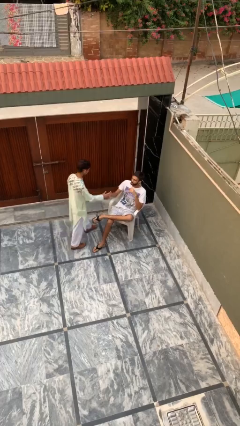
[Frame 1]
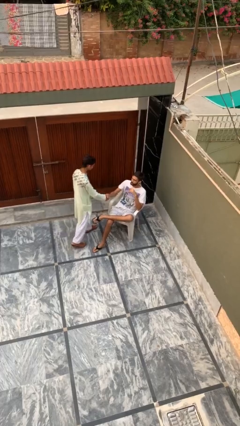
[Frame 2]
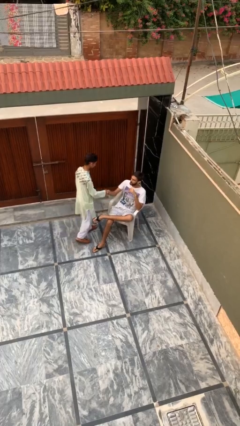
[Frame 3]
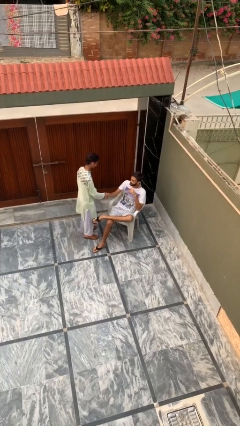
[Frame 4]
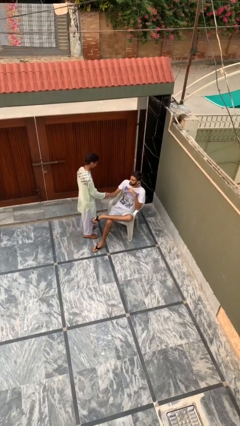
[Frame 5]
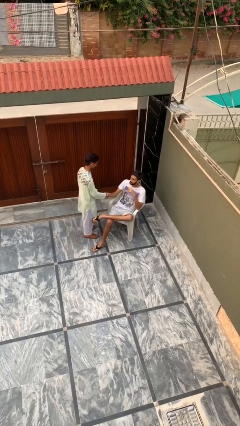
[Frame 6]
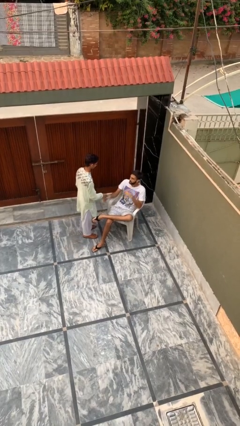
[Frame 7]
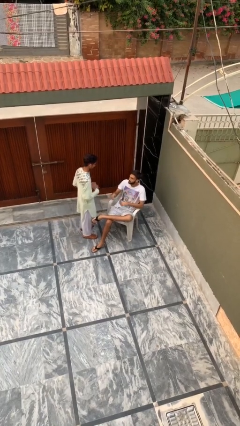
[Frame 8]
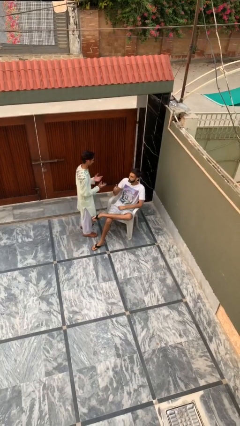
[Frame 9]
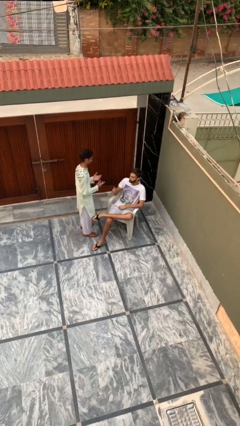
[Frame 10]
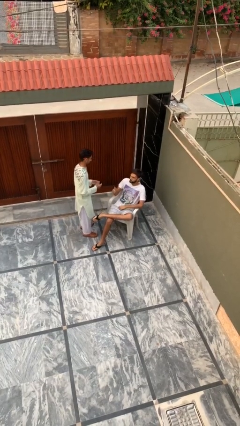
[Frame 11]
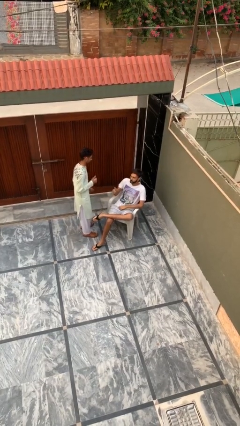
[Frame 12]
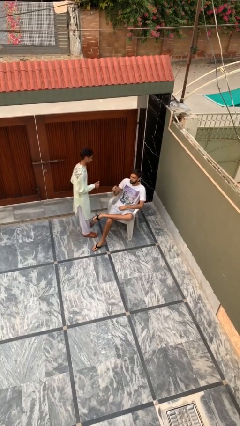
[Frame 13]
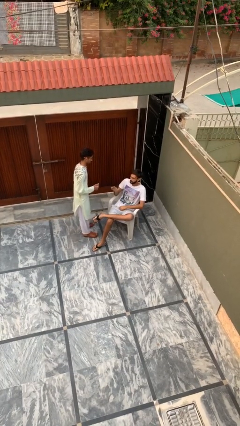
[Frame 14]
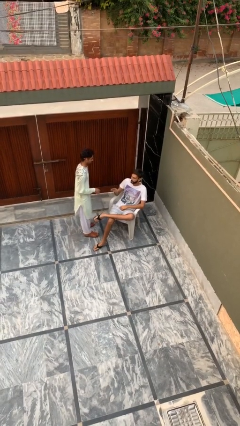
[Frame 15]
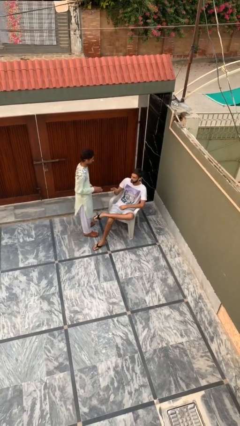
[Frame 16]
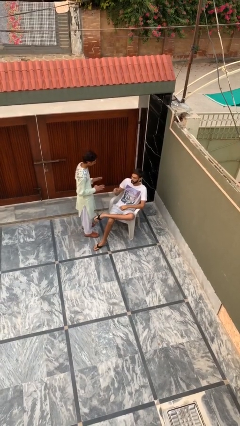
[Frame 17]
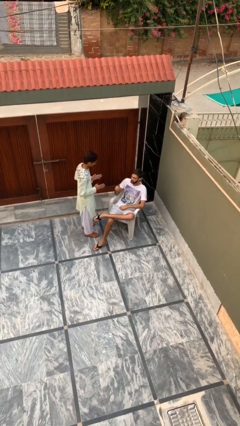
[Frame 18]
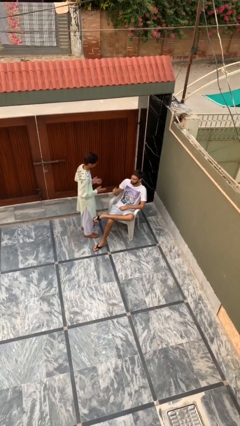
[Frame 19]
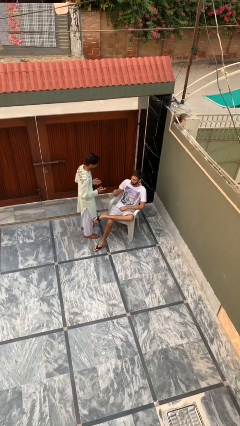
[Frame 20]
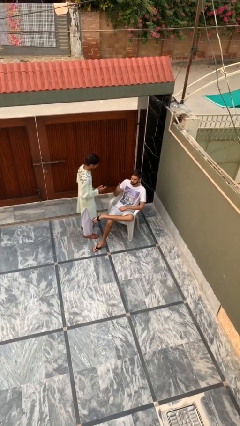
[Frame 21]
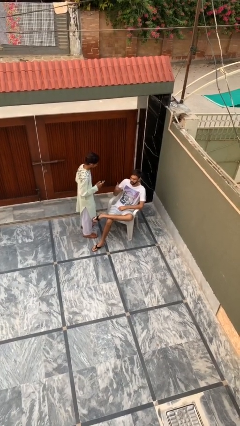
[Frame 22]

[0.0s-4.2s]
person shakes hand

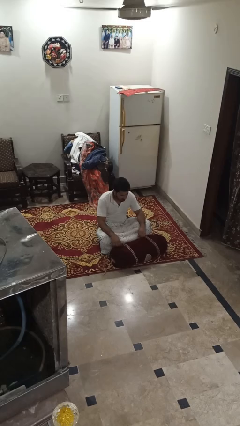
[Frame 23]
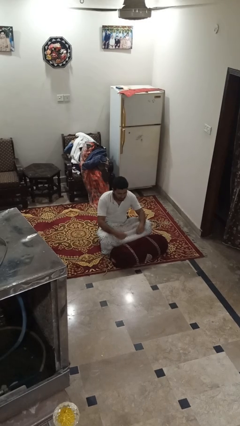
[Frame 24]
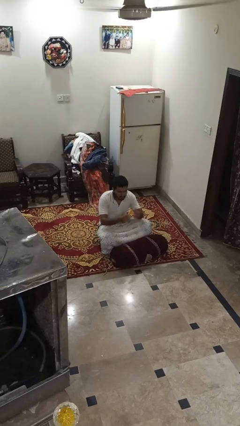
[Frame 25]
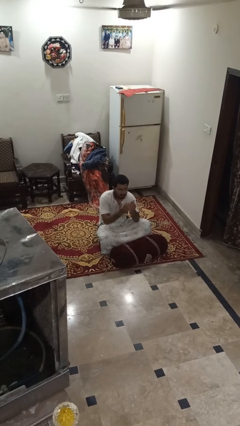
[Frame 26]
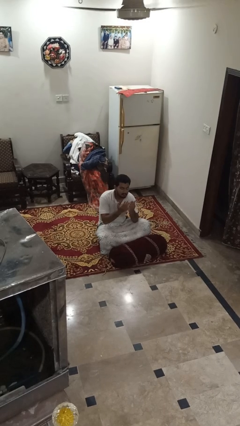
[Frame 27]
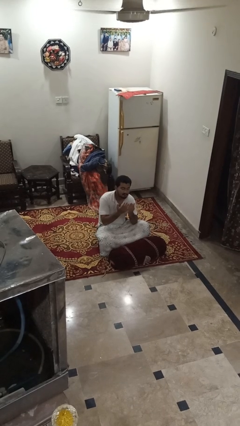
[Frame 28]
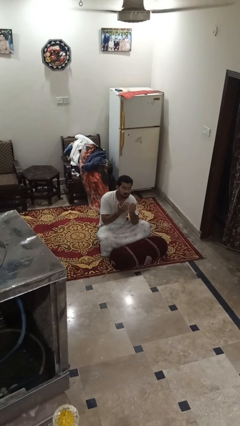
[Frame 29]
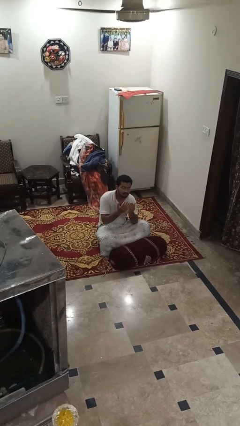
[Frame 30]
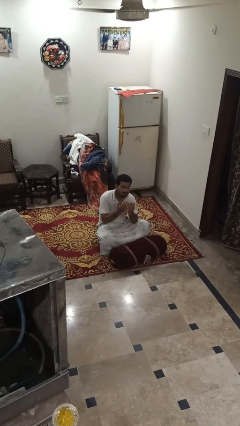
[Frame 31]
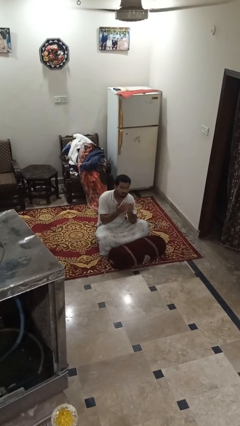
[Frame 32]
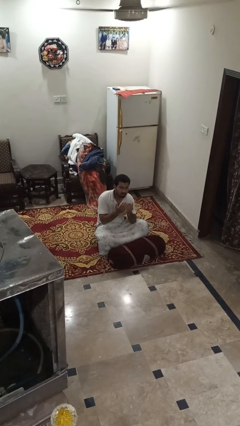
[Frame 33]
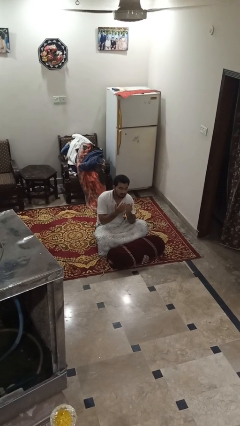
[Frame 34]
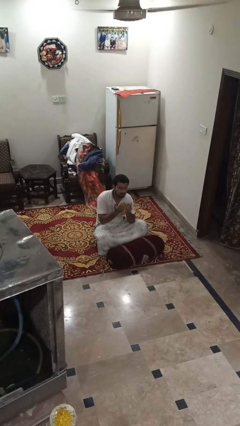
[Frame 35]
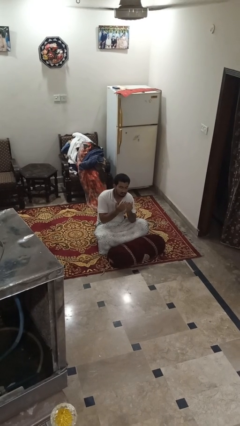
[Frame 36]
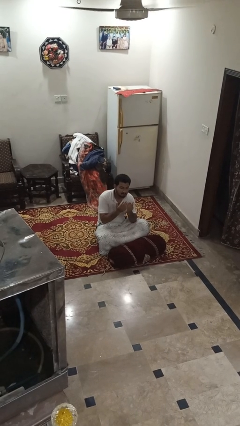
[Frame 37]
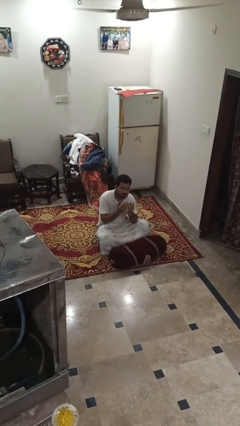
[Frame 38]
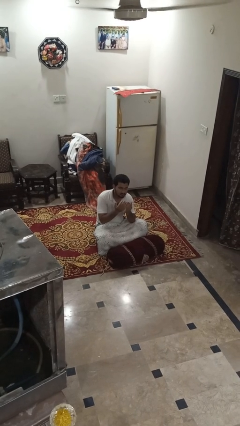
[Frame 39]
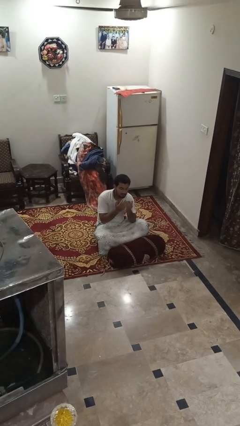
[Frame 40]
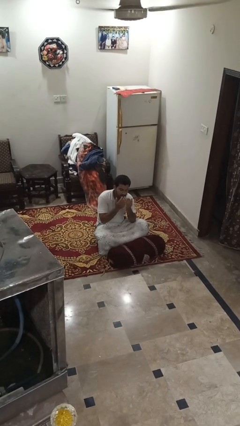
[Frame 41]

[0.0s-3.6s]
person prays

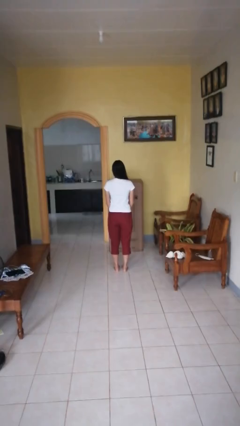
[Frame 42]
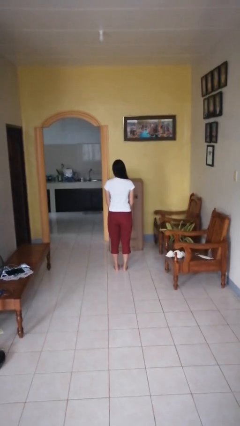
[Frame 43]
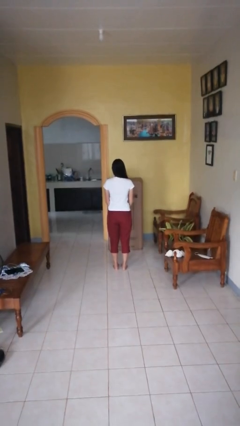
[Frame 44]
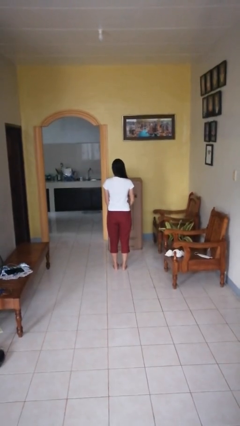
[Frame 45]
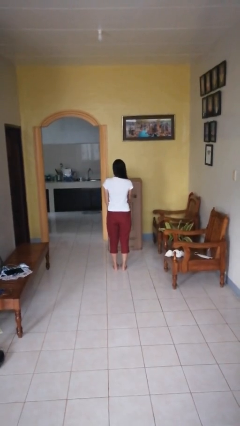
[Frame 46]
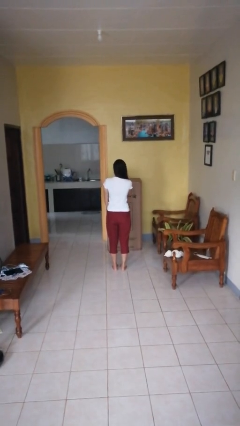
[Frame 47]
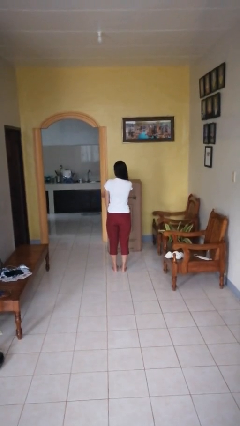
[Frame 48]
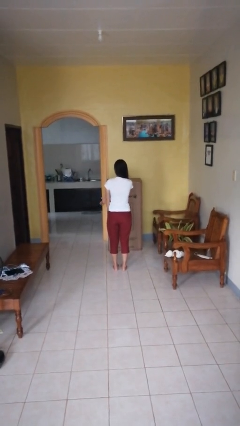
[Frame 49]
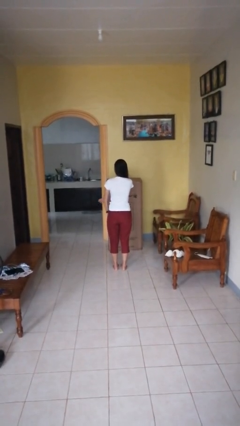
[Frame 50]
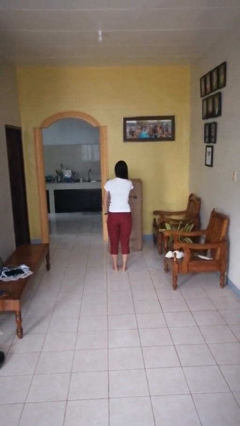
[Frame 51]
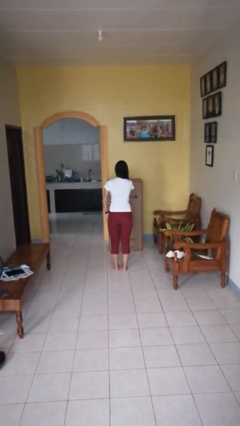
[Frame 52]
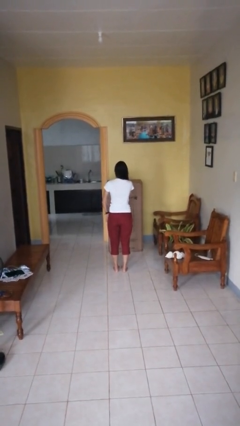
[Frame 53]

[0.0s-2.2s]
person swats bug

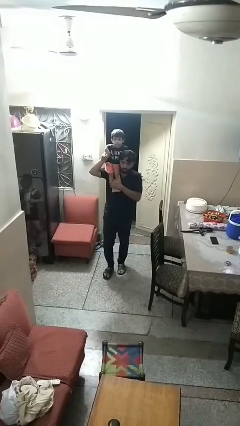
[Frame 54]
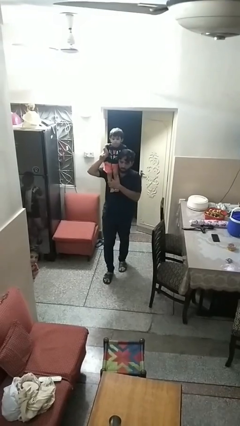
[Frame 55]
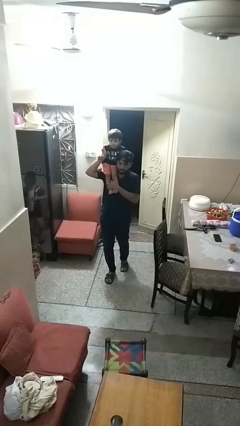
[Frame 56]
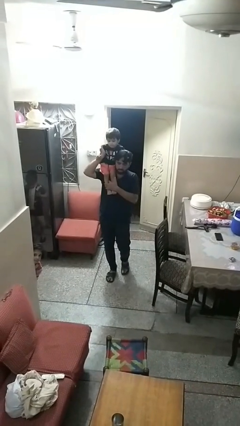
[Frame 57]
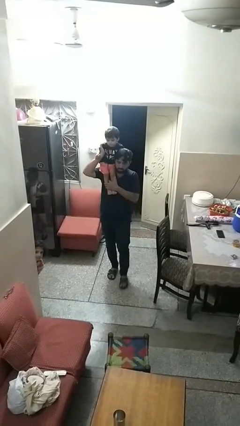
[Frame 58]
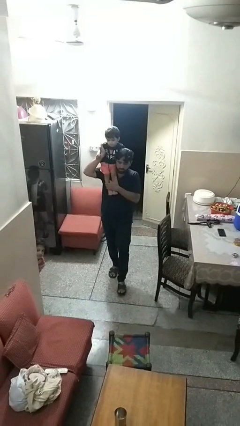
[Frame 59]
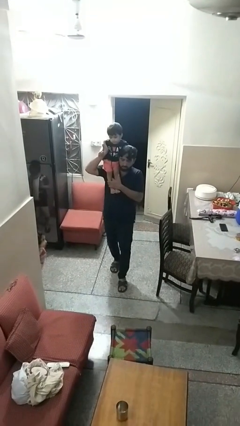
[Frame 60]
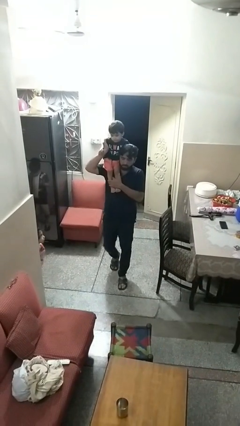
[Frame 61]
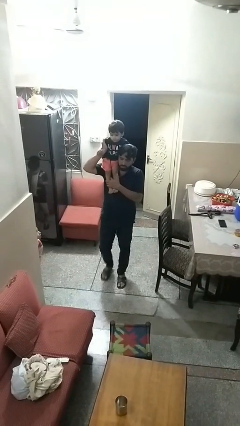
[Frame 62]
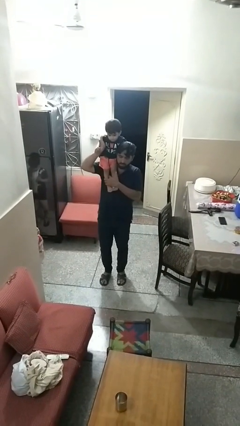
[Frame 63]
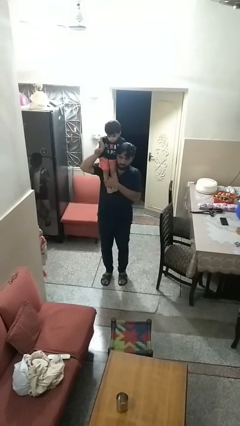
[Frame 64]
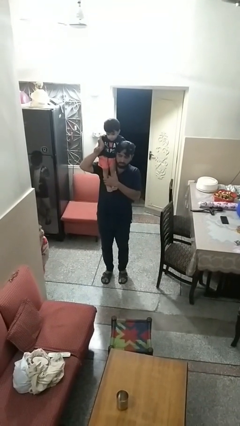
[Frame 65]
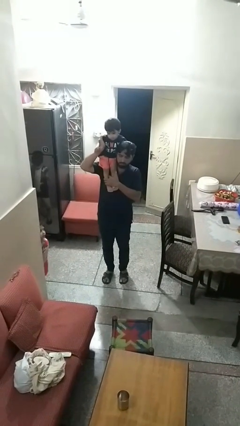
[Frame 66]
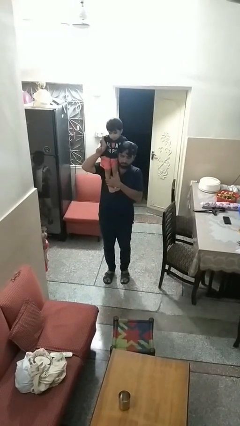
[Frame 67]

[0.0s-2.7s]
person carries person on shoulders

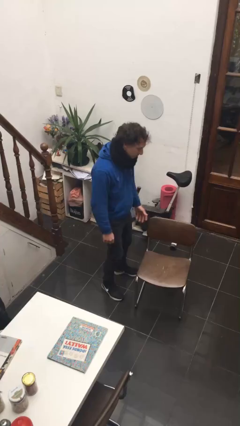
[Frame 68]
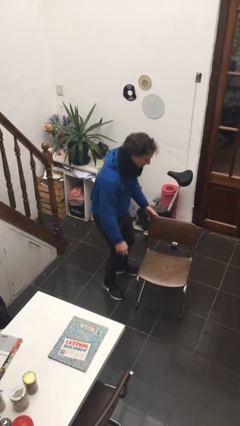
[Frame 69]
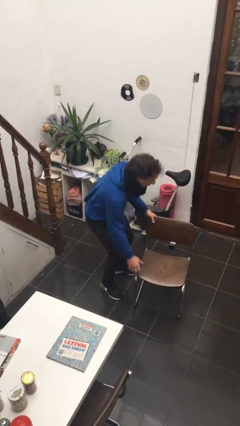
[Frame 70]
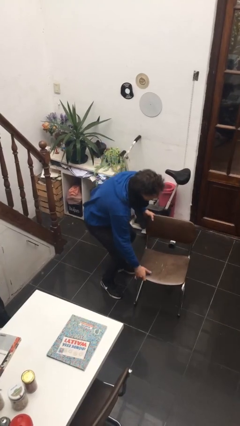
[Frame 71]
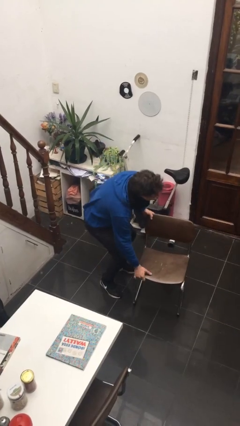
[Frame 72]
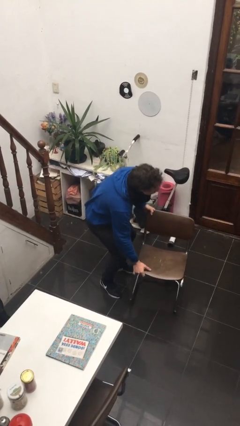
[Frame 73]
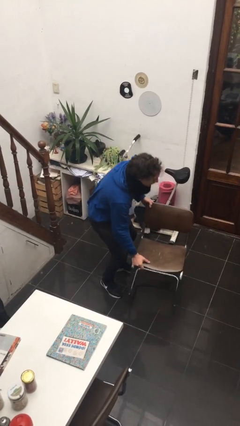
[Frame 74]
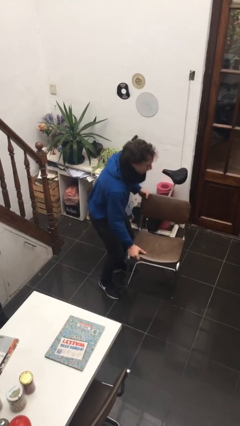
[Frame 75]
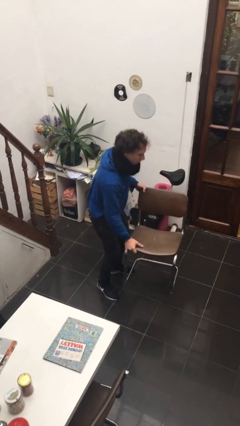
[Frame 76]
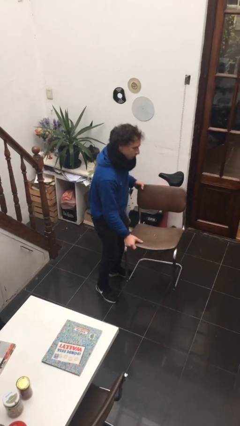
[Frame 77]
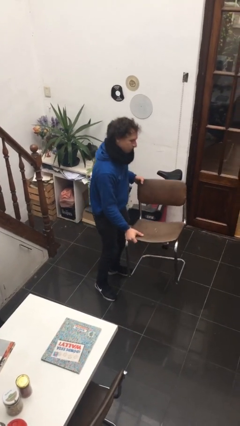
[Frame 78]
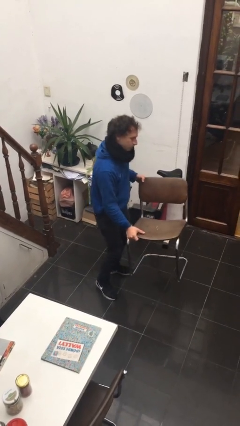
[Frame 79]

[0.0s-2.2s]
person picks up object from floor

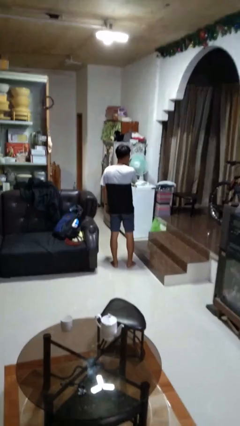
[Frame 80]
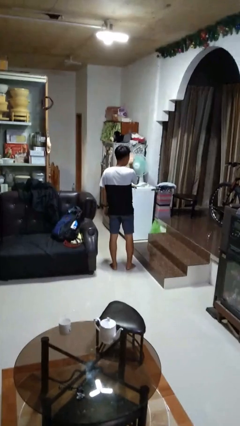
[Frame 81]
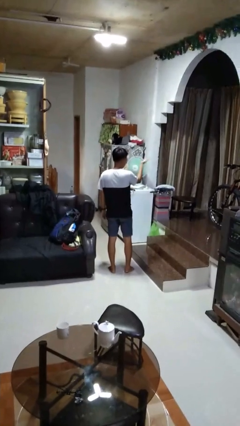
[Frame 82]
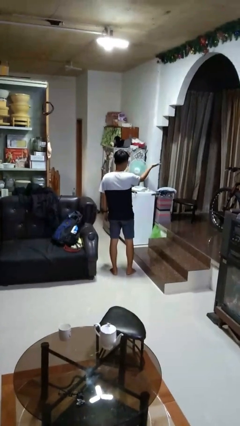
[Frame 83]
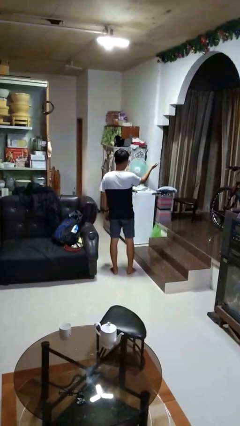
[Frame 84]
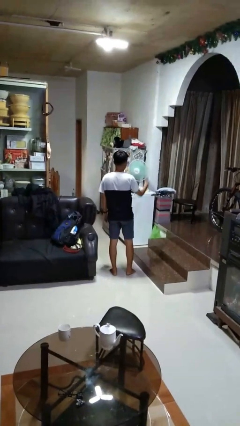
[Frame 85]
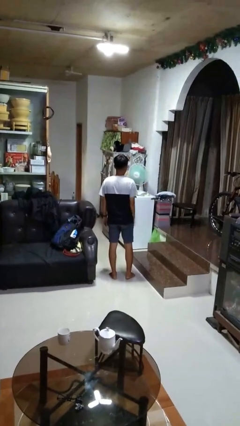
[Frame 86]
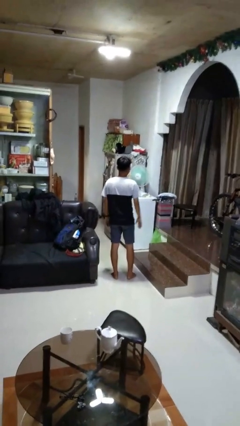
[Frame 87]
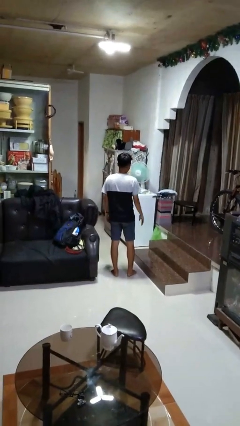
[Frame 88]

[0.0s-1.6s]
person gestures blow kiss

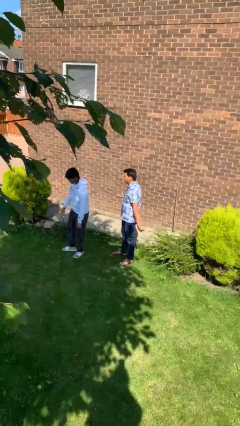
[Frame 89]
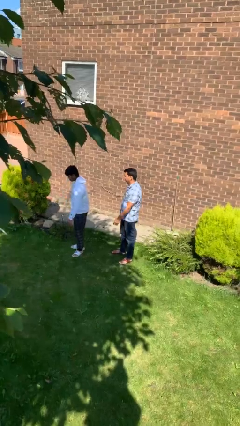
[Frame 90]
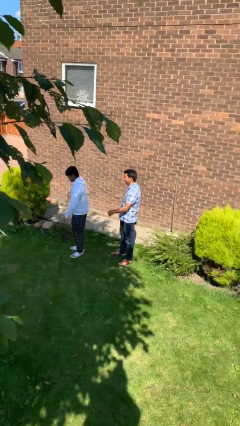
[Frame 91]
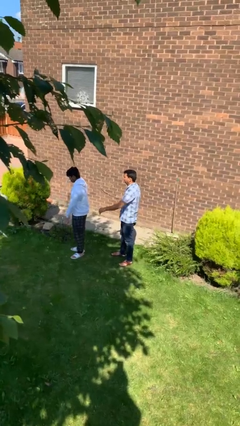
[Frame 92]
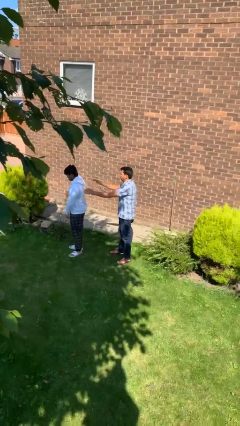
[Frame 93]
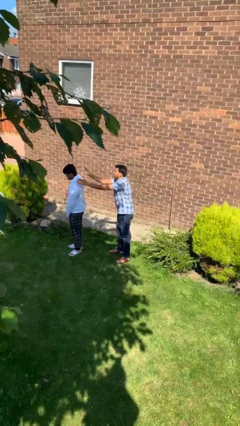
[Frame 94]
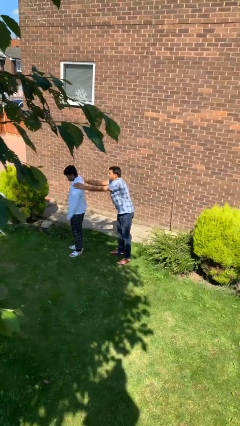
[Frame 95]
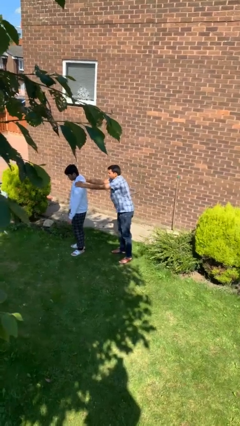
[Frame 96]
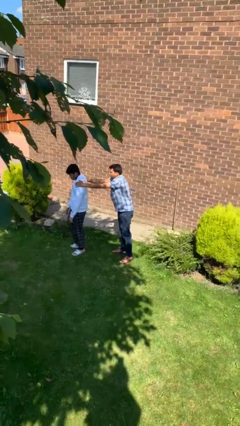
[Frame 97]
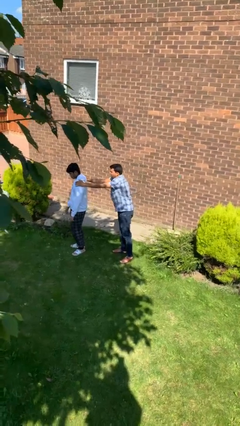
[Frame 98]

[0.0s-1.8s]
person grabs person by shoulder
